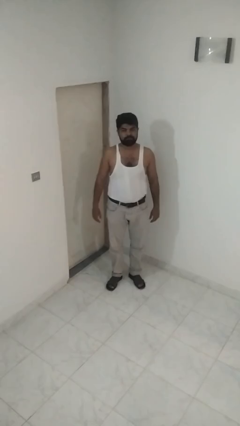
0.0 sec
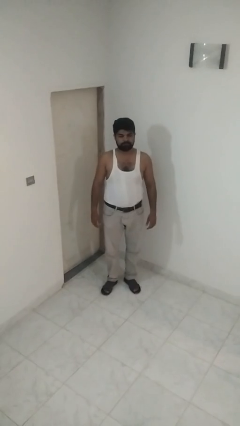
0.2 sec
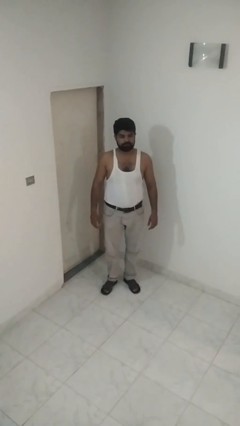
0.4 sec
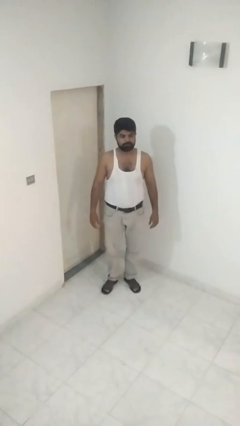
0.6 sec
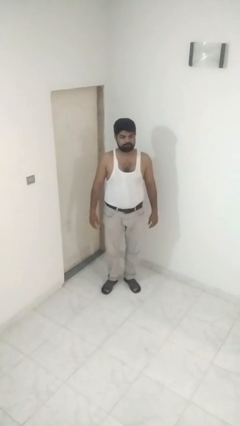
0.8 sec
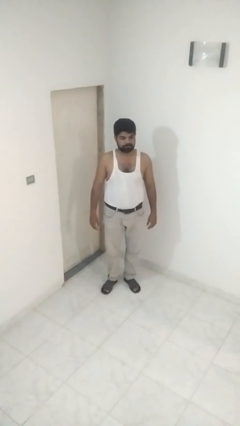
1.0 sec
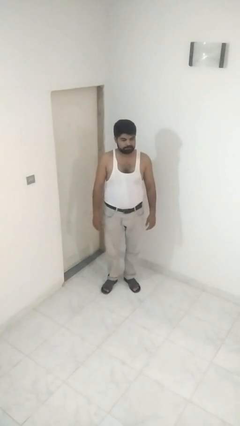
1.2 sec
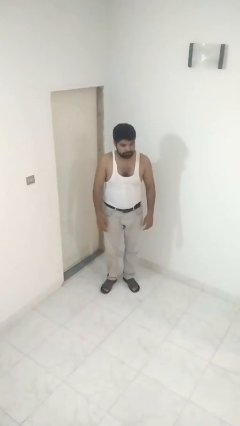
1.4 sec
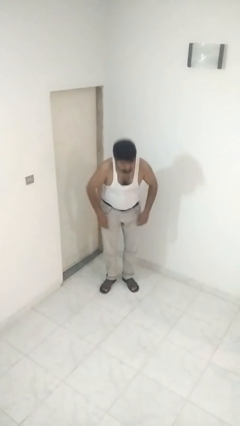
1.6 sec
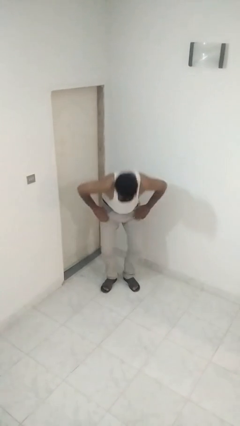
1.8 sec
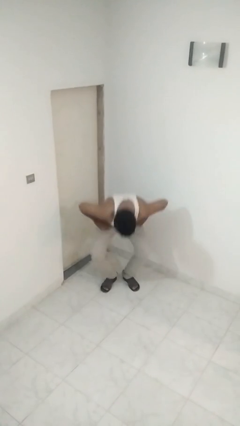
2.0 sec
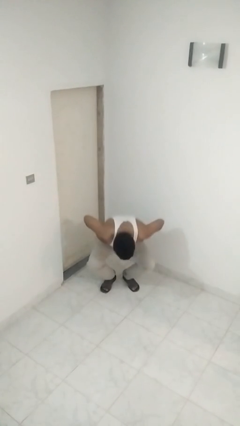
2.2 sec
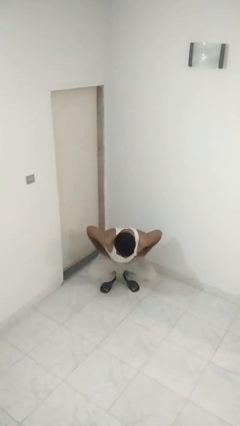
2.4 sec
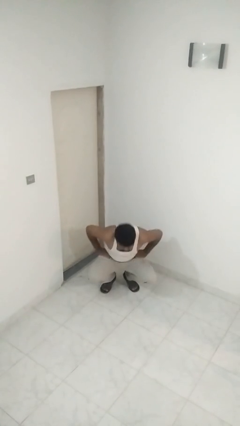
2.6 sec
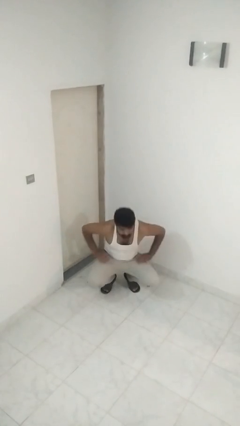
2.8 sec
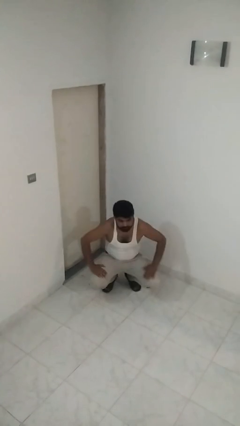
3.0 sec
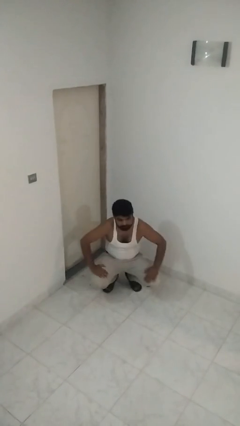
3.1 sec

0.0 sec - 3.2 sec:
person squats

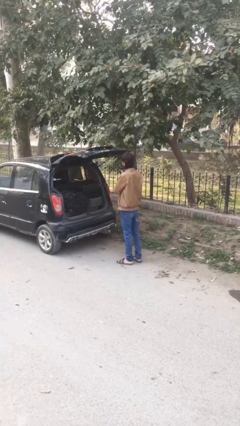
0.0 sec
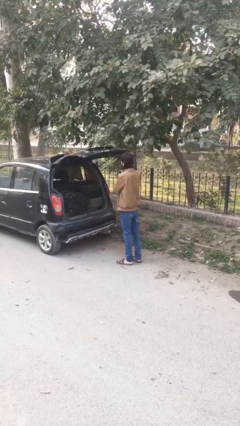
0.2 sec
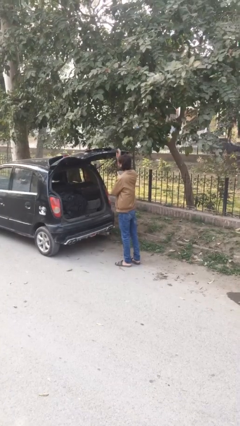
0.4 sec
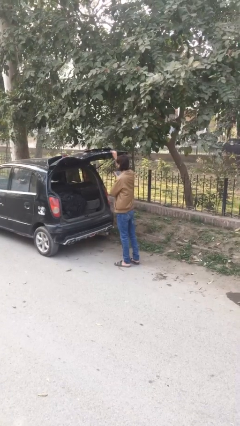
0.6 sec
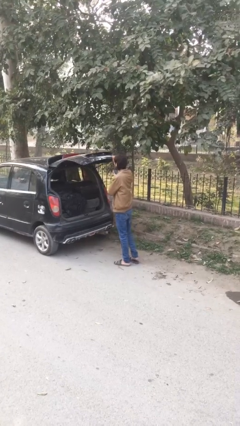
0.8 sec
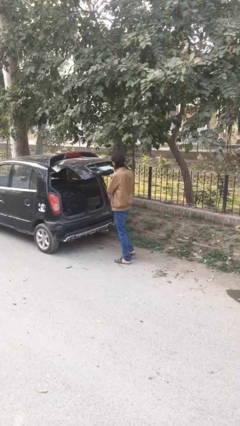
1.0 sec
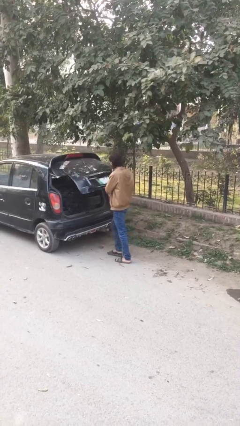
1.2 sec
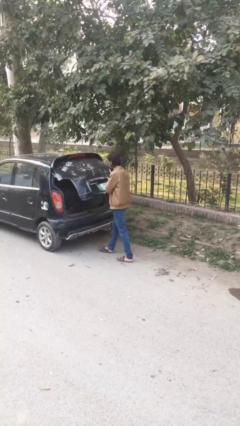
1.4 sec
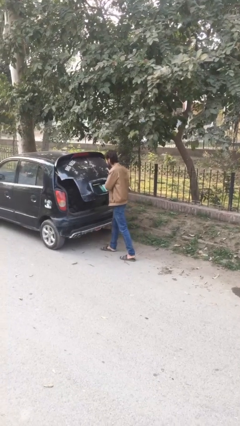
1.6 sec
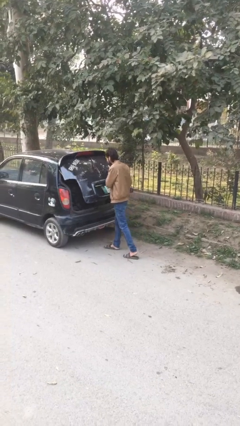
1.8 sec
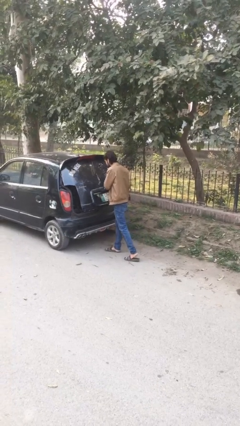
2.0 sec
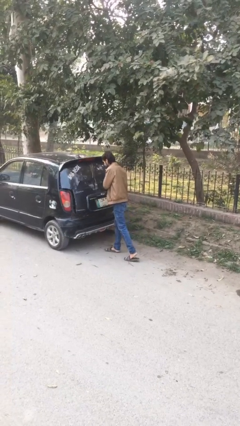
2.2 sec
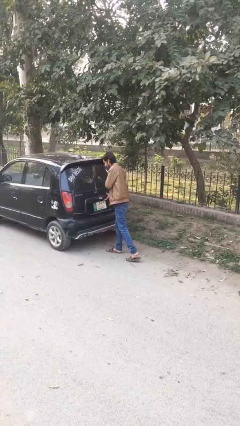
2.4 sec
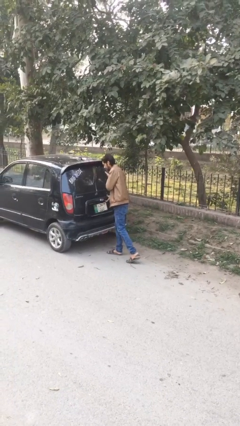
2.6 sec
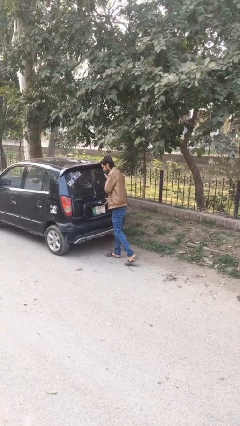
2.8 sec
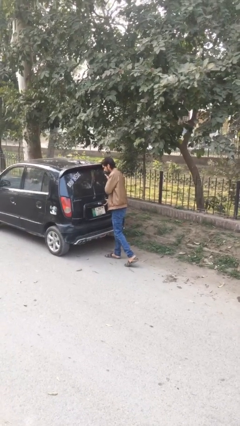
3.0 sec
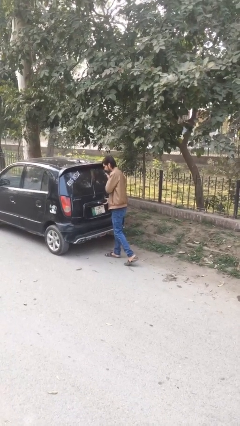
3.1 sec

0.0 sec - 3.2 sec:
person closes car trunk

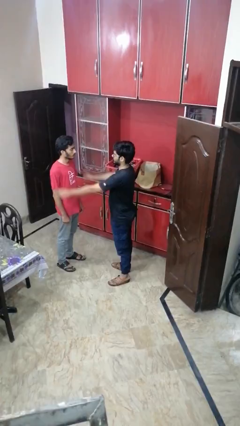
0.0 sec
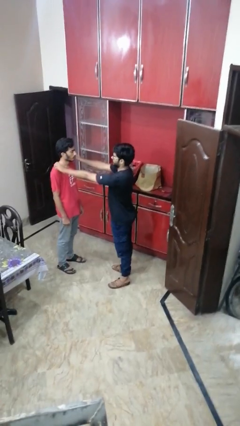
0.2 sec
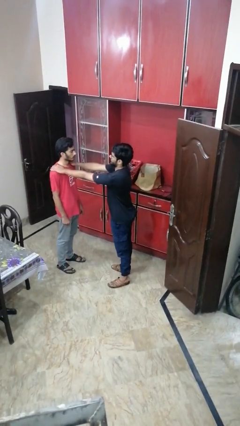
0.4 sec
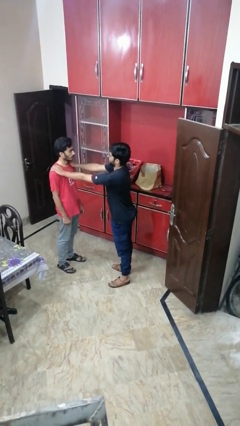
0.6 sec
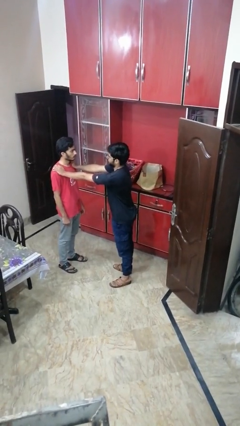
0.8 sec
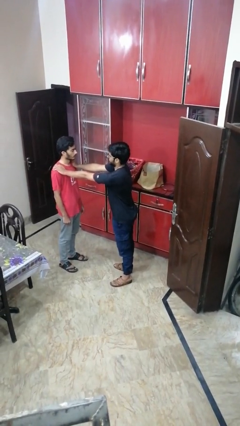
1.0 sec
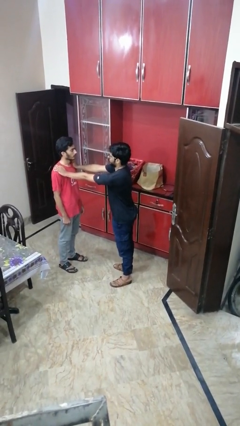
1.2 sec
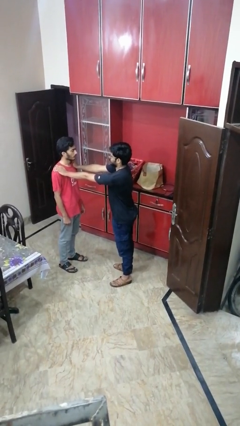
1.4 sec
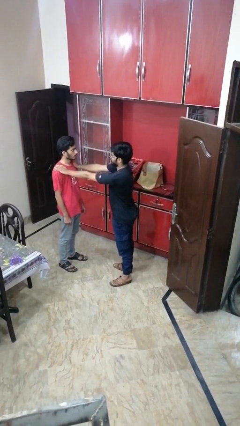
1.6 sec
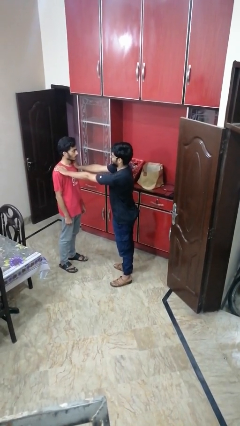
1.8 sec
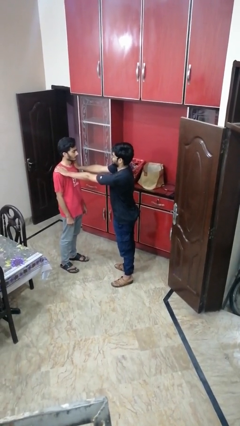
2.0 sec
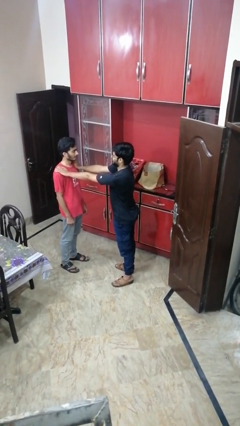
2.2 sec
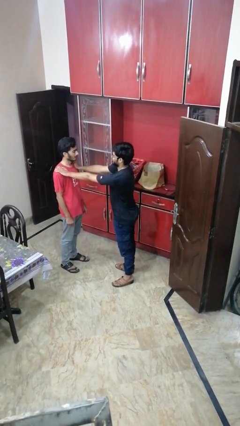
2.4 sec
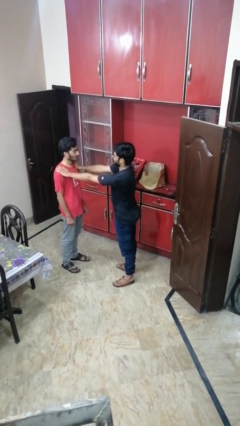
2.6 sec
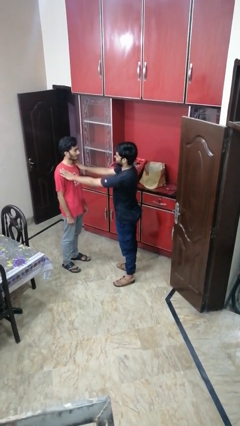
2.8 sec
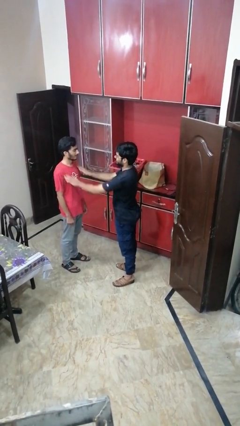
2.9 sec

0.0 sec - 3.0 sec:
person pounds shoulders of person

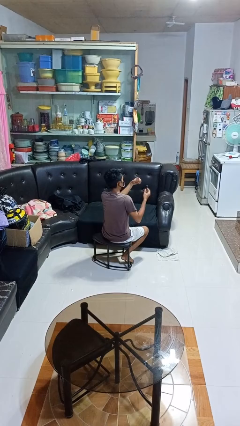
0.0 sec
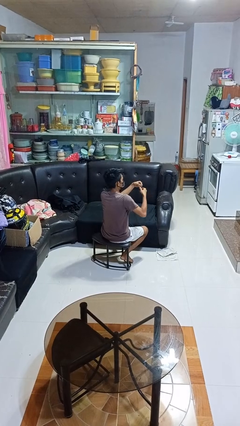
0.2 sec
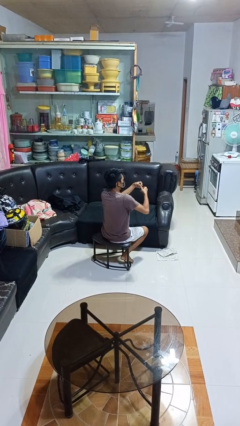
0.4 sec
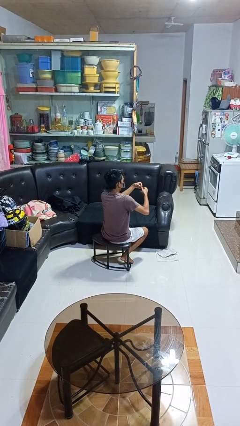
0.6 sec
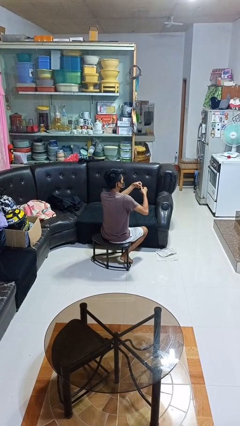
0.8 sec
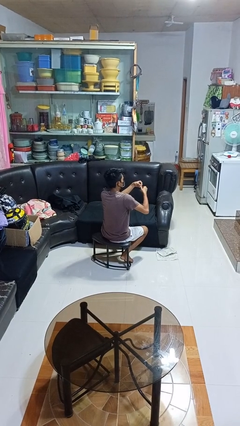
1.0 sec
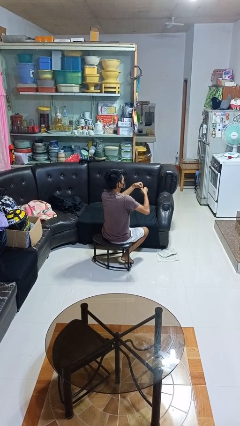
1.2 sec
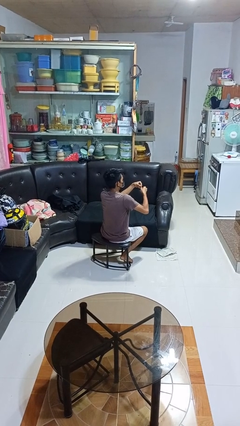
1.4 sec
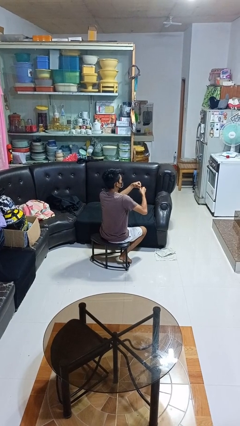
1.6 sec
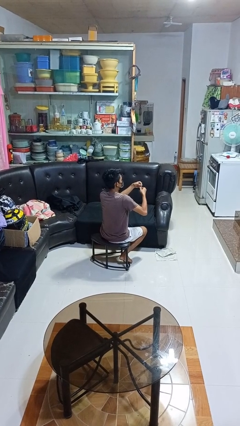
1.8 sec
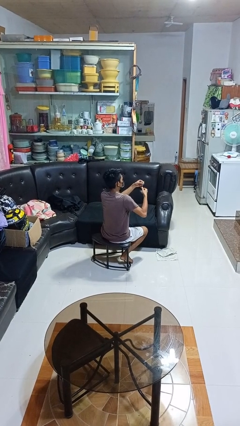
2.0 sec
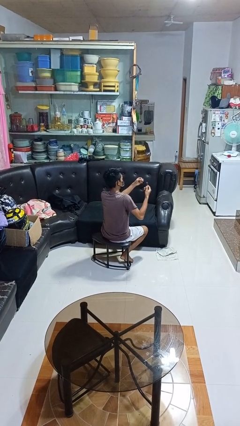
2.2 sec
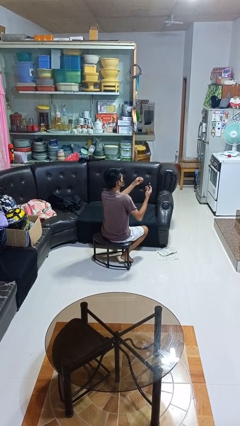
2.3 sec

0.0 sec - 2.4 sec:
person clips fingernails

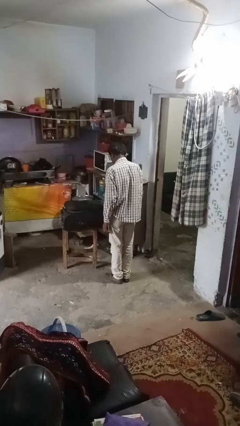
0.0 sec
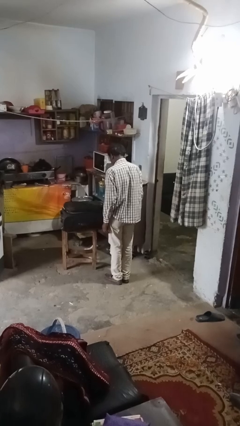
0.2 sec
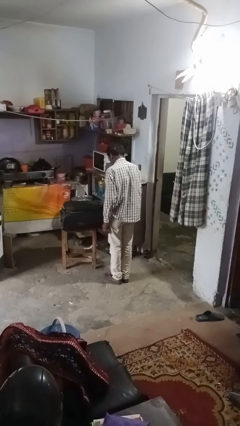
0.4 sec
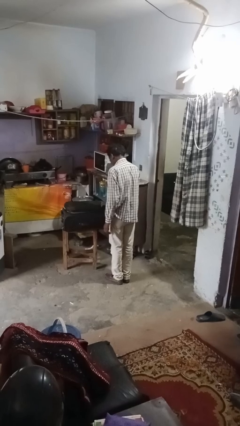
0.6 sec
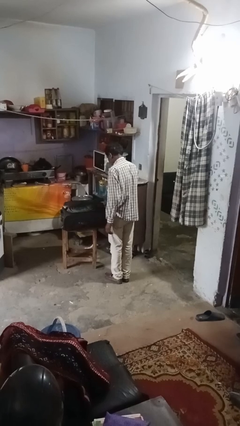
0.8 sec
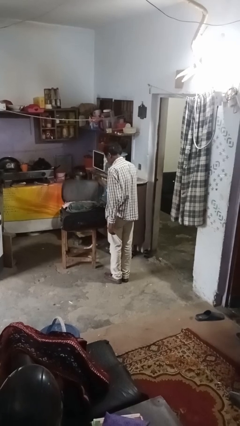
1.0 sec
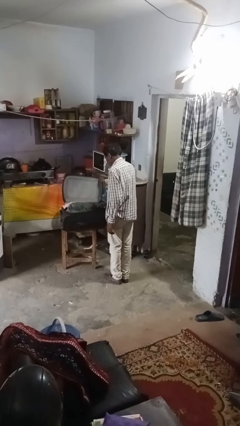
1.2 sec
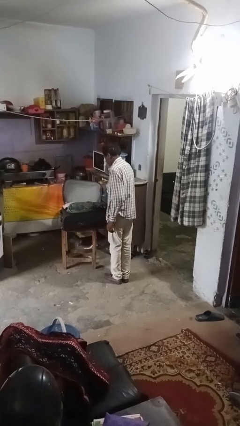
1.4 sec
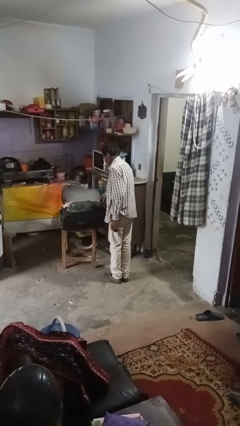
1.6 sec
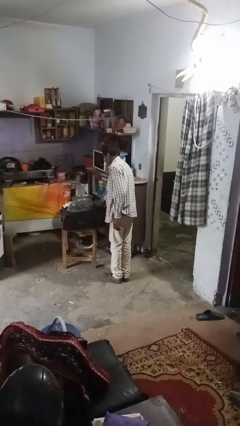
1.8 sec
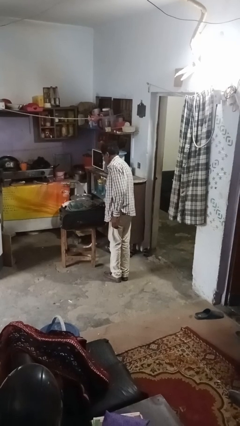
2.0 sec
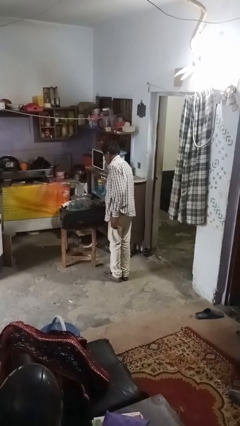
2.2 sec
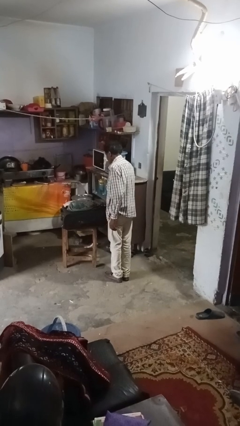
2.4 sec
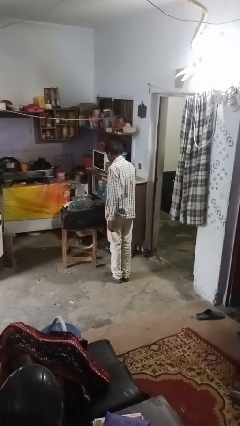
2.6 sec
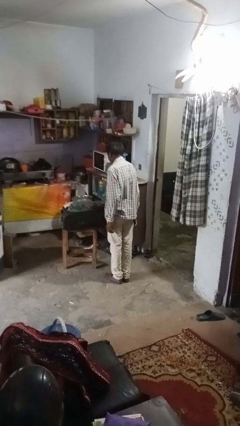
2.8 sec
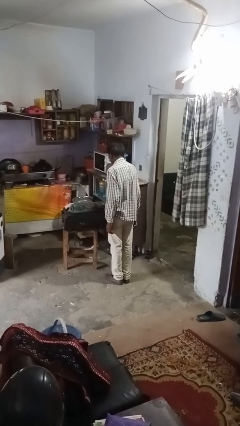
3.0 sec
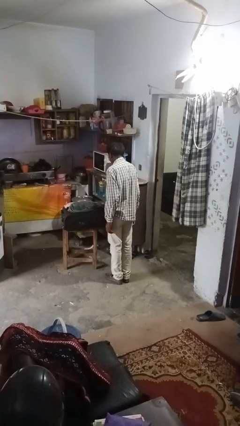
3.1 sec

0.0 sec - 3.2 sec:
person opens suitcase

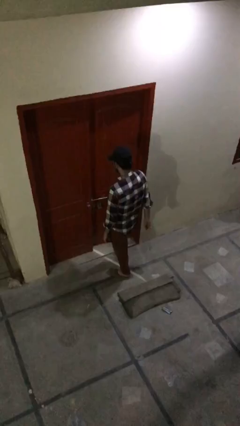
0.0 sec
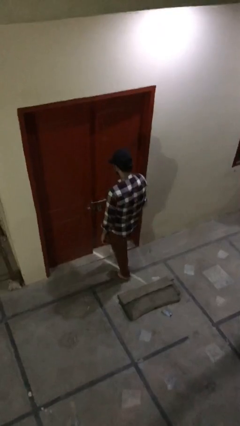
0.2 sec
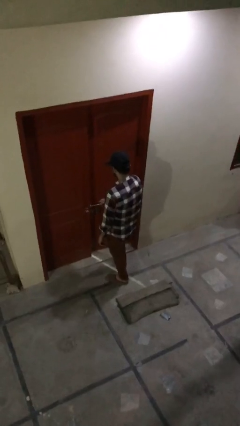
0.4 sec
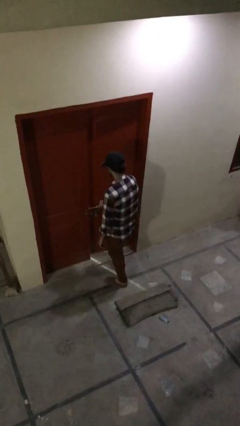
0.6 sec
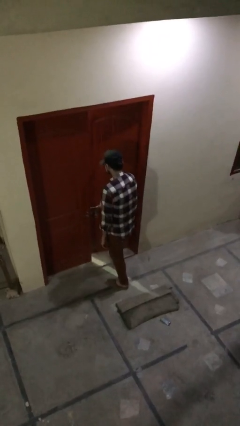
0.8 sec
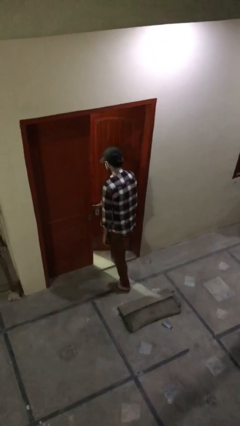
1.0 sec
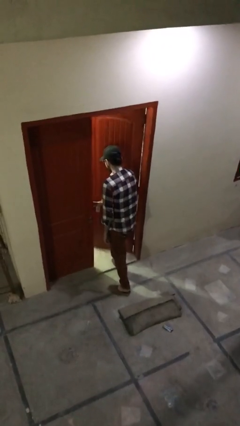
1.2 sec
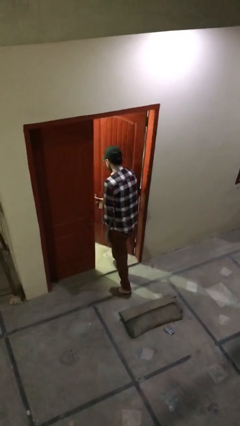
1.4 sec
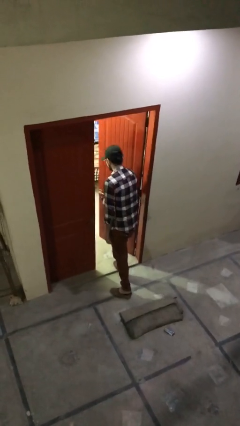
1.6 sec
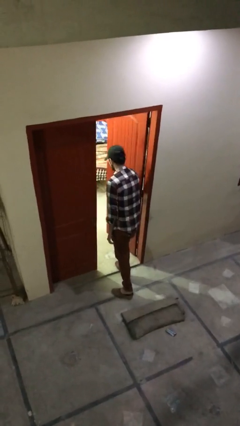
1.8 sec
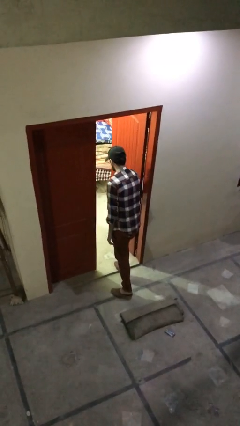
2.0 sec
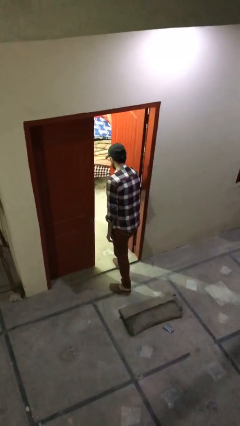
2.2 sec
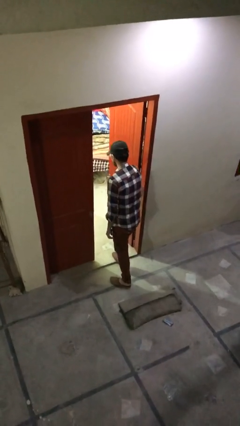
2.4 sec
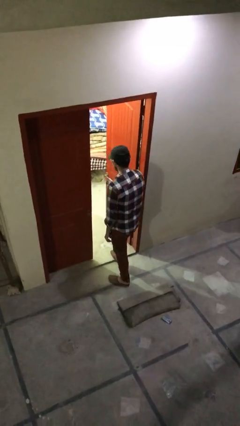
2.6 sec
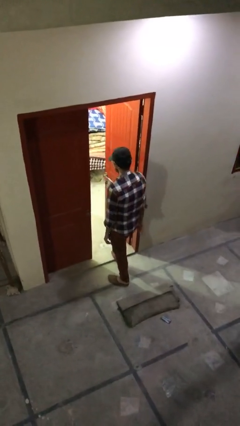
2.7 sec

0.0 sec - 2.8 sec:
person opens facility door
